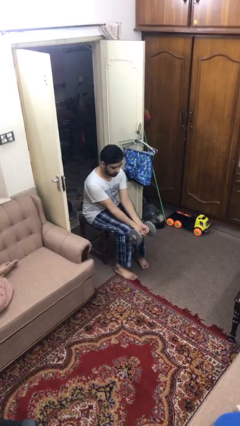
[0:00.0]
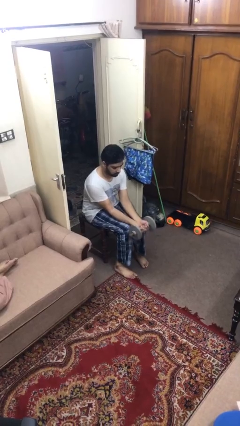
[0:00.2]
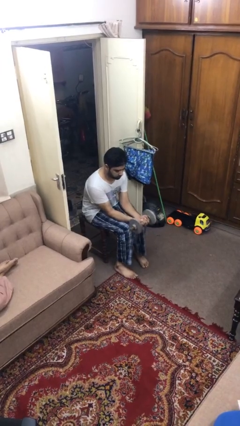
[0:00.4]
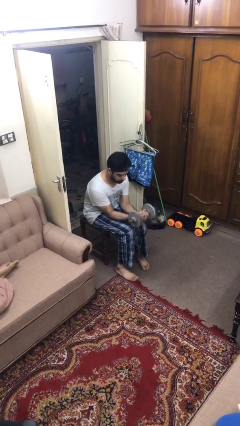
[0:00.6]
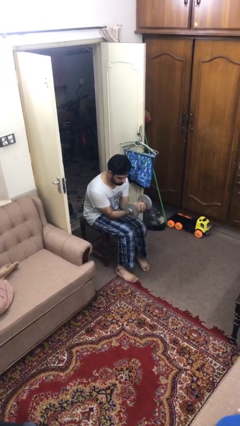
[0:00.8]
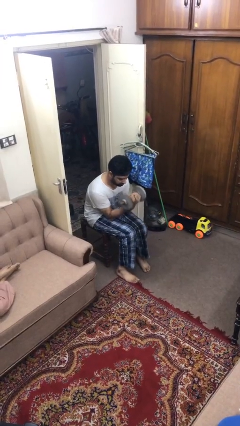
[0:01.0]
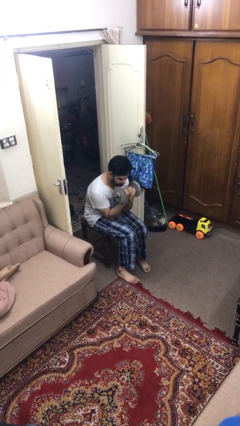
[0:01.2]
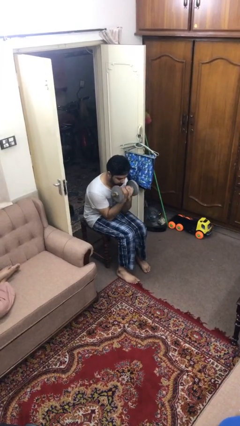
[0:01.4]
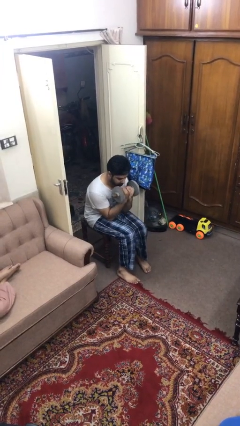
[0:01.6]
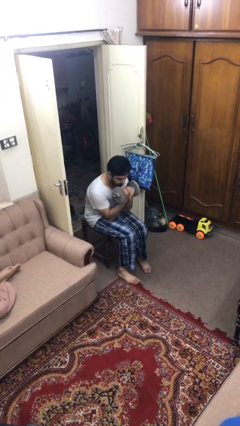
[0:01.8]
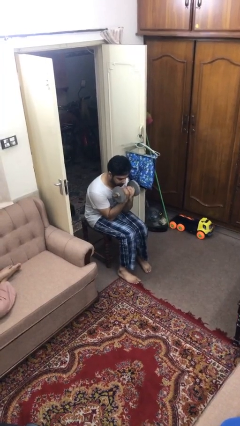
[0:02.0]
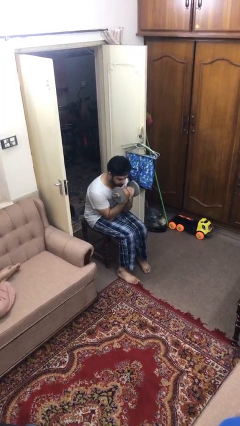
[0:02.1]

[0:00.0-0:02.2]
person lifts dumbbells

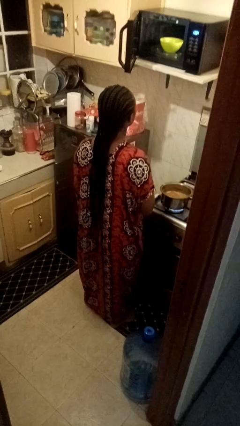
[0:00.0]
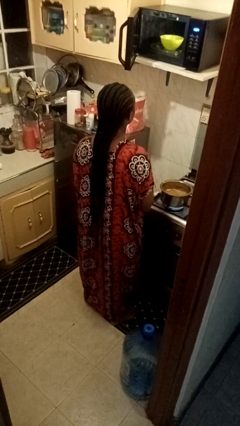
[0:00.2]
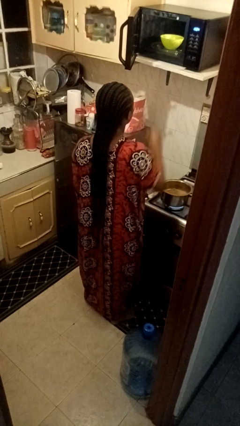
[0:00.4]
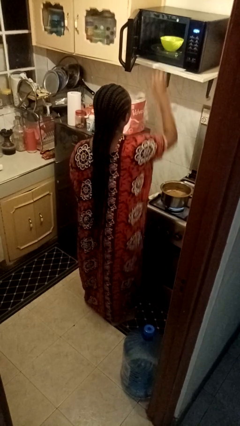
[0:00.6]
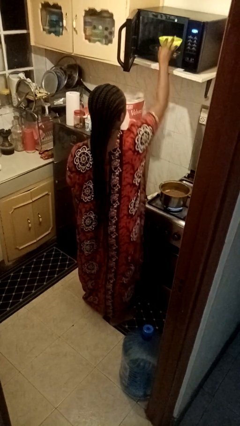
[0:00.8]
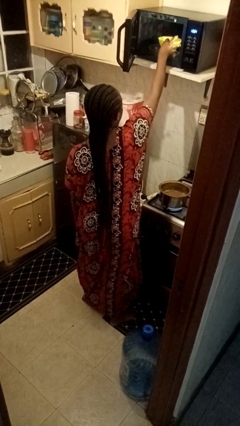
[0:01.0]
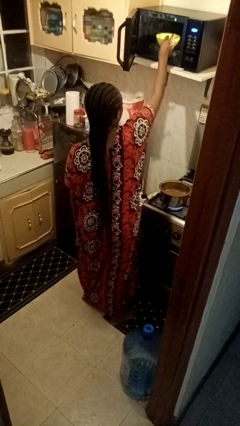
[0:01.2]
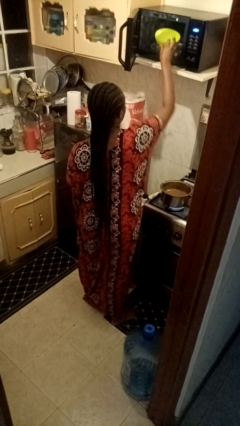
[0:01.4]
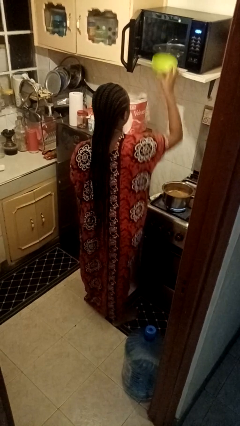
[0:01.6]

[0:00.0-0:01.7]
person takes object from microwave

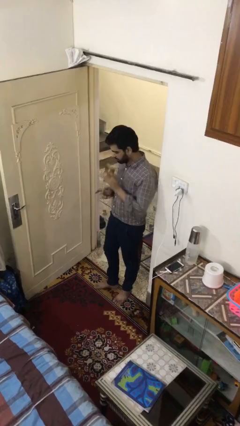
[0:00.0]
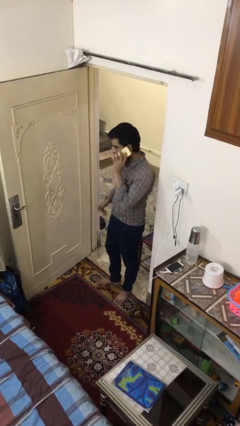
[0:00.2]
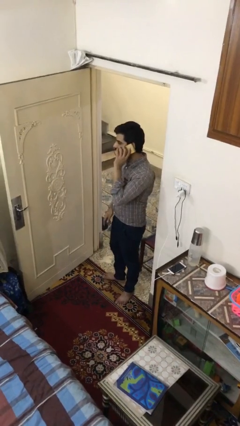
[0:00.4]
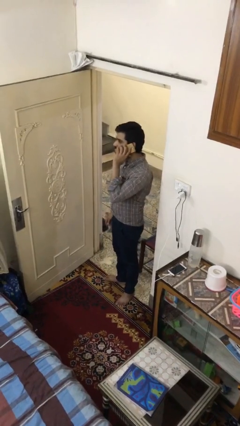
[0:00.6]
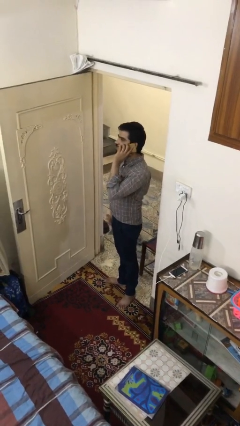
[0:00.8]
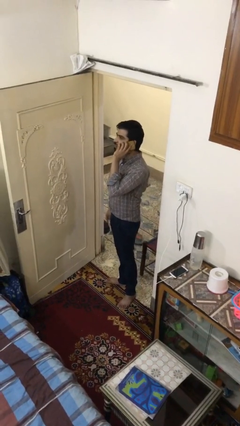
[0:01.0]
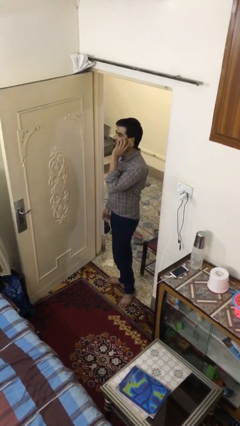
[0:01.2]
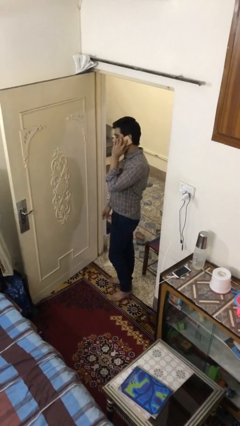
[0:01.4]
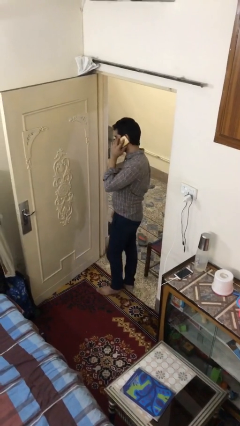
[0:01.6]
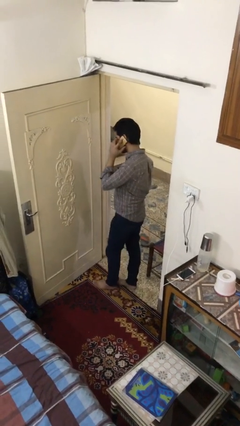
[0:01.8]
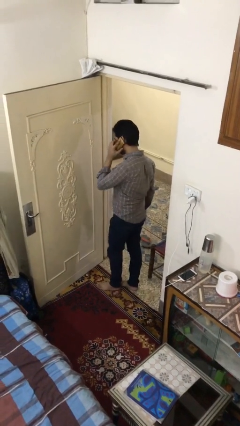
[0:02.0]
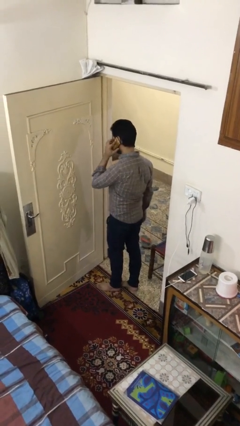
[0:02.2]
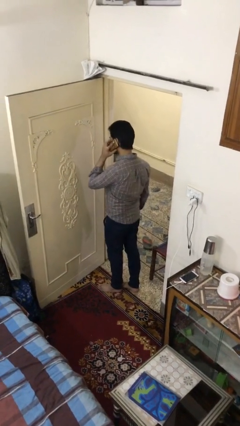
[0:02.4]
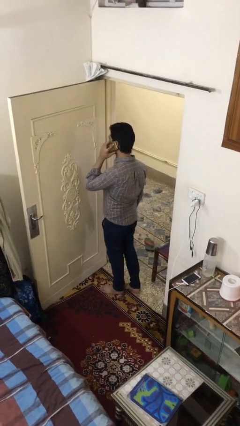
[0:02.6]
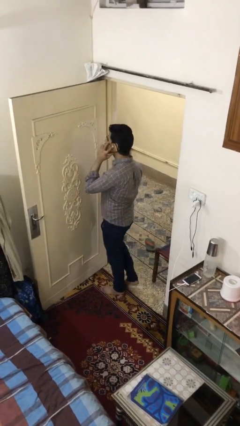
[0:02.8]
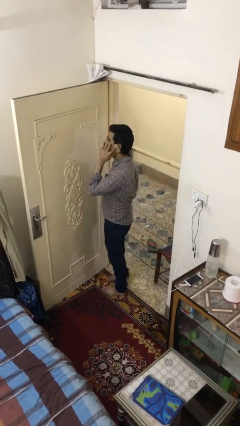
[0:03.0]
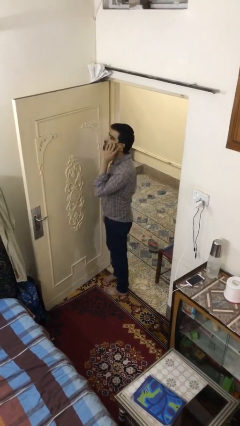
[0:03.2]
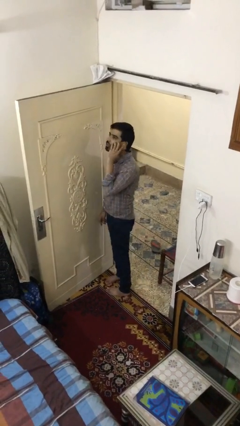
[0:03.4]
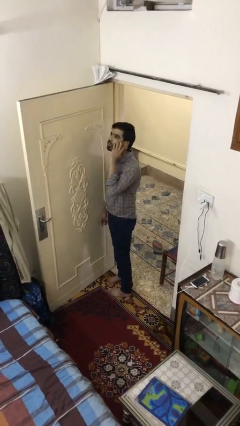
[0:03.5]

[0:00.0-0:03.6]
person talks on phone

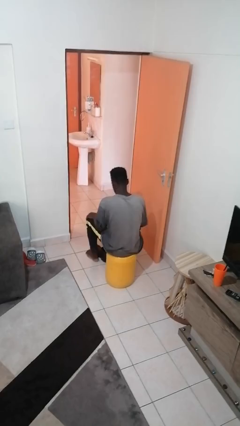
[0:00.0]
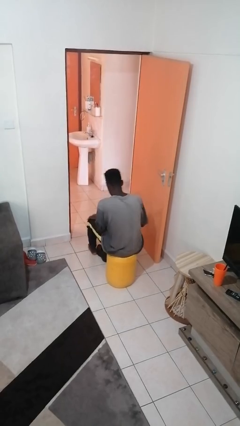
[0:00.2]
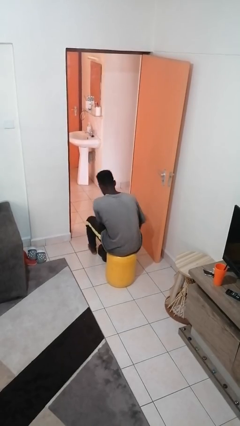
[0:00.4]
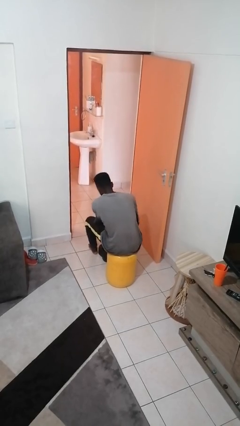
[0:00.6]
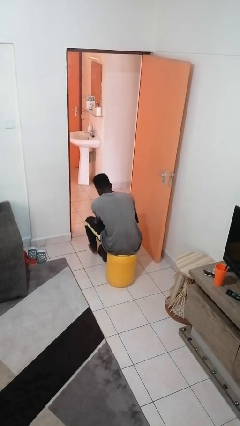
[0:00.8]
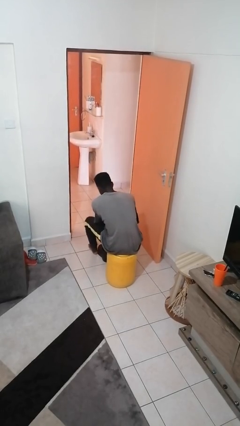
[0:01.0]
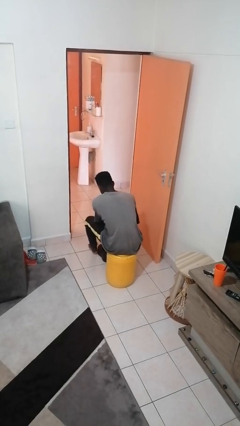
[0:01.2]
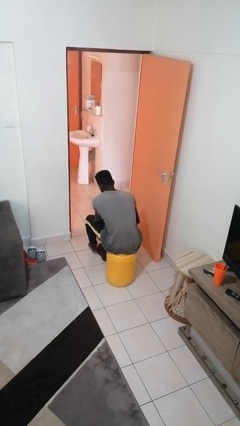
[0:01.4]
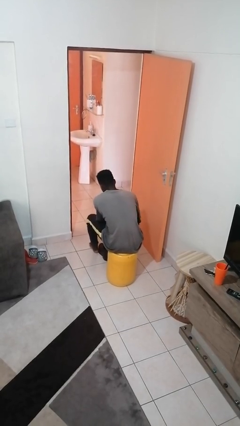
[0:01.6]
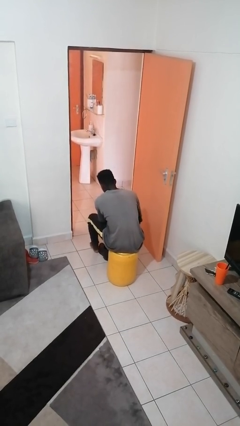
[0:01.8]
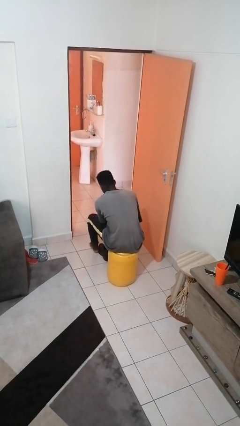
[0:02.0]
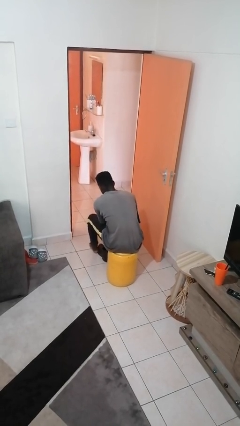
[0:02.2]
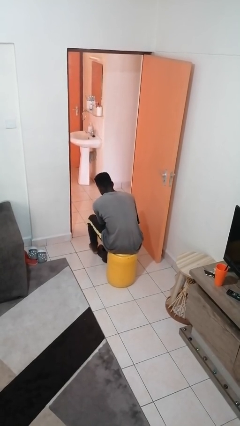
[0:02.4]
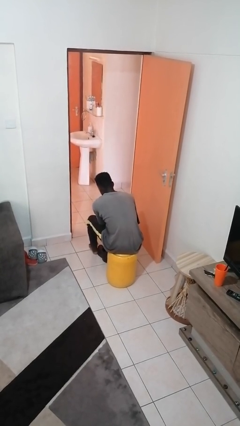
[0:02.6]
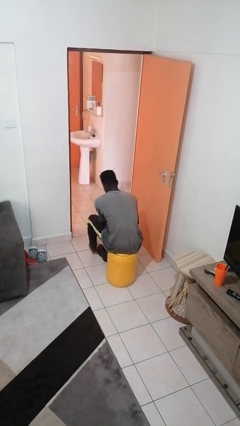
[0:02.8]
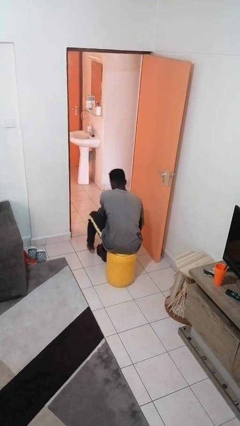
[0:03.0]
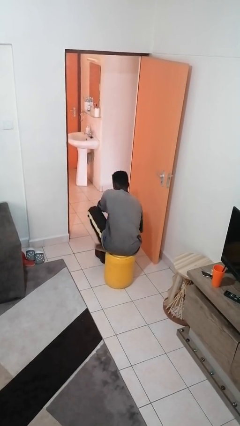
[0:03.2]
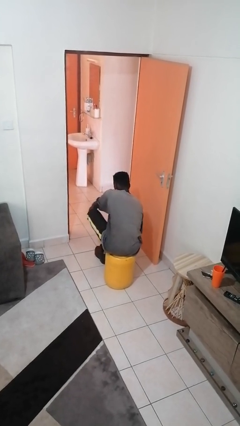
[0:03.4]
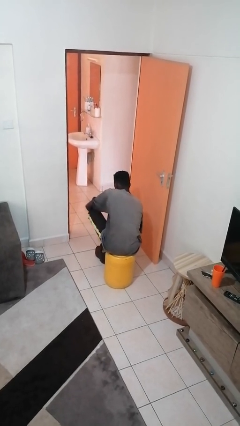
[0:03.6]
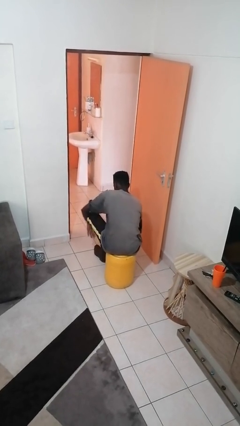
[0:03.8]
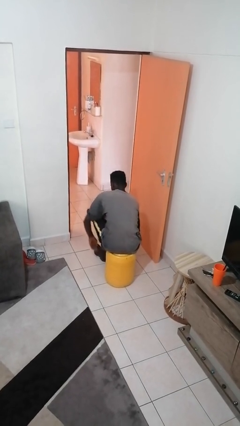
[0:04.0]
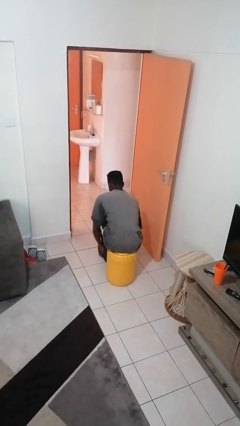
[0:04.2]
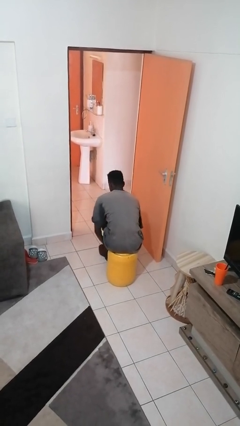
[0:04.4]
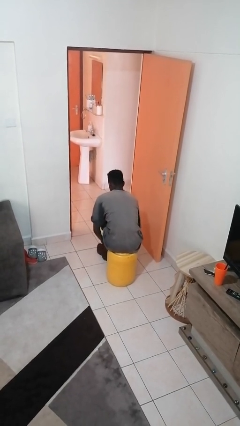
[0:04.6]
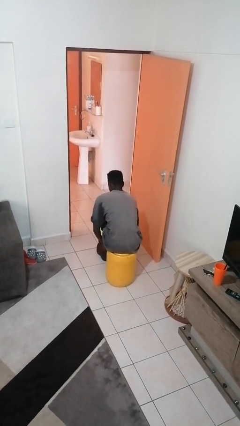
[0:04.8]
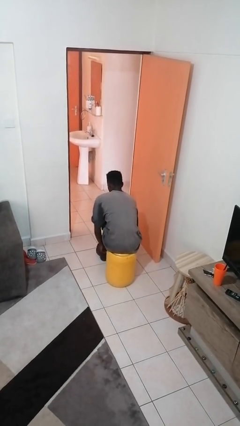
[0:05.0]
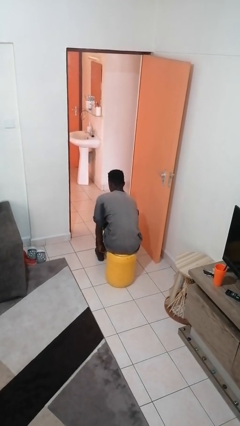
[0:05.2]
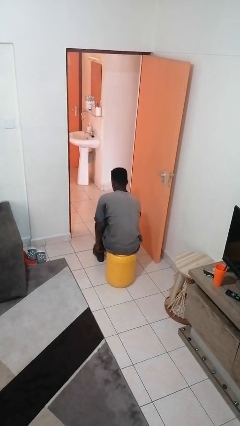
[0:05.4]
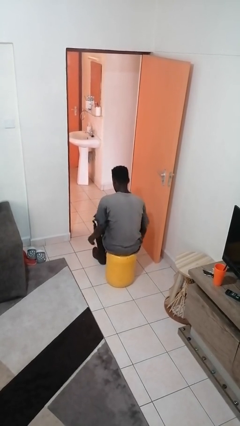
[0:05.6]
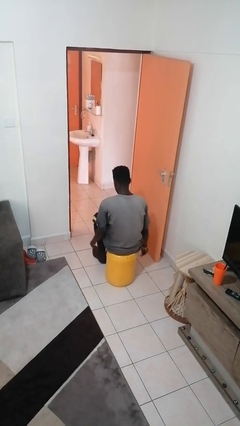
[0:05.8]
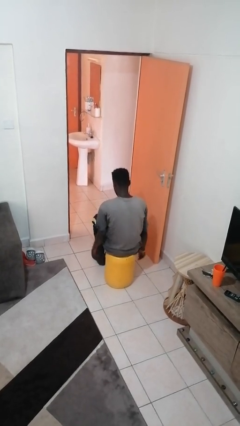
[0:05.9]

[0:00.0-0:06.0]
person puts on shoes

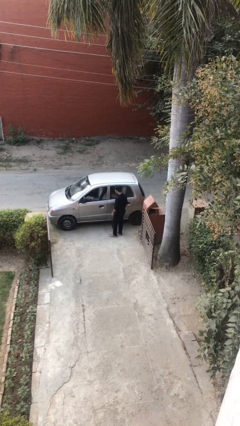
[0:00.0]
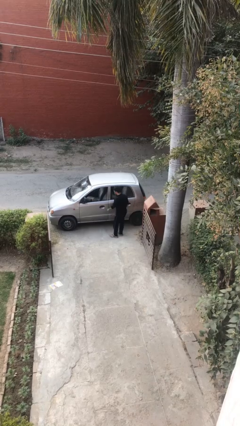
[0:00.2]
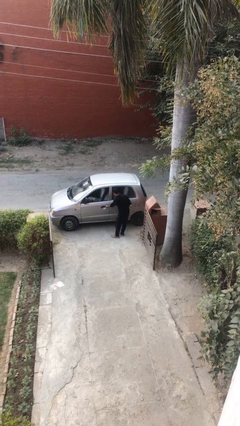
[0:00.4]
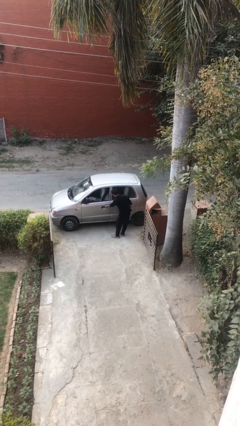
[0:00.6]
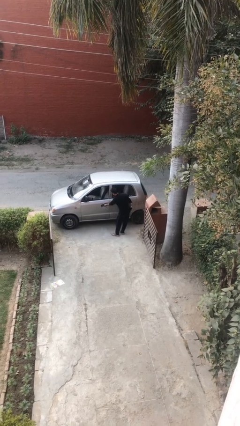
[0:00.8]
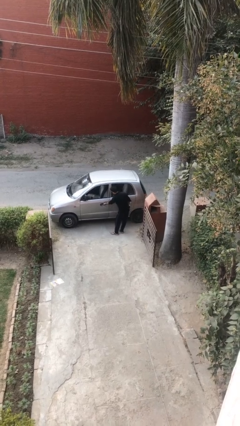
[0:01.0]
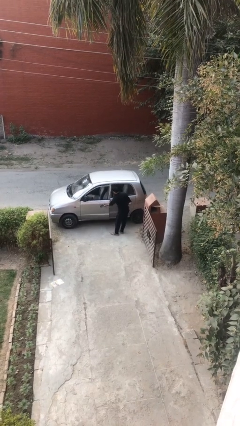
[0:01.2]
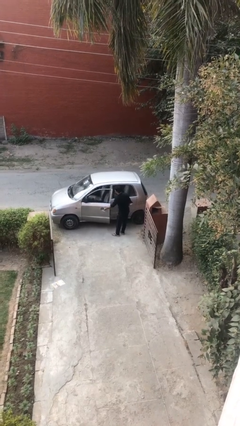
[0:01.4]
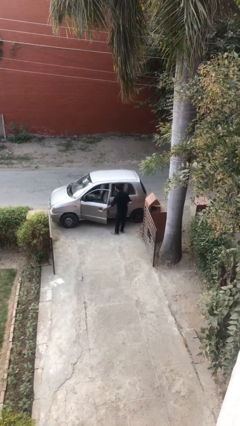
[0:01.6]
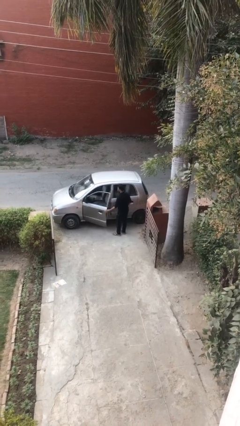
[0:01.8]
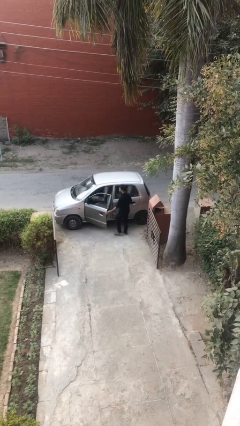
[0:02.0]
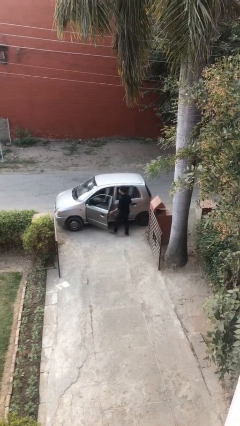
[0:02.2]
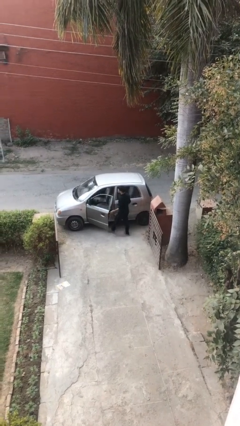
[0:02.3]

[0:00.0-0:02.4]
person opens car door

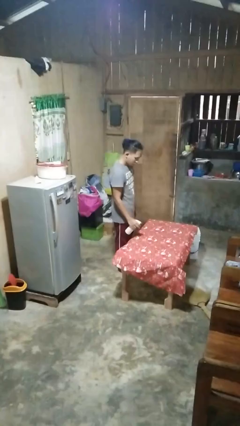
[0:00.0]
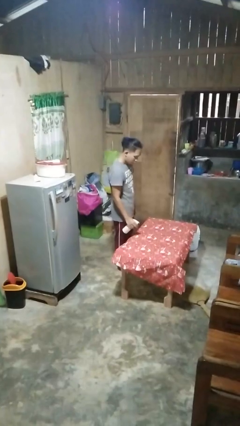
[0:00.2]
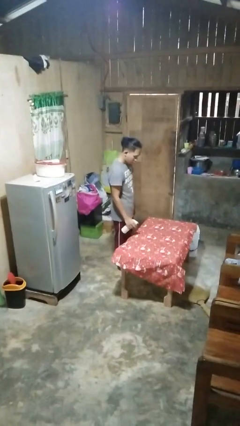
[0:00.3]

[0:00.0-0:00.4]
person sprays from bottle

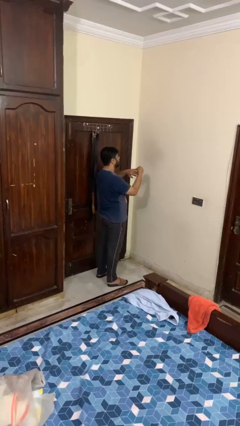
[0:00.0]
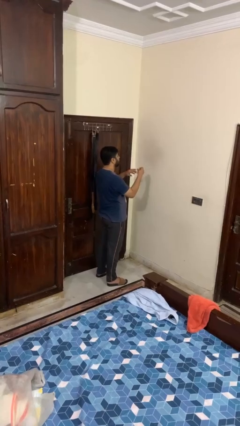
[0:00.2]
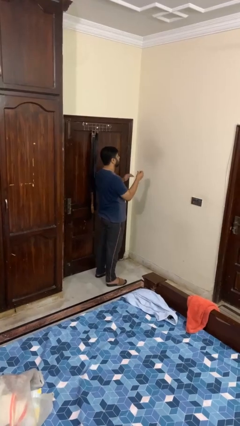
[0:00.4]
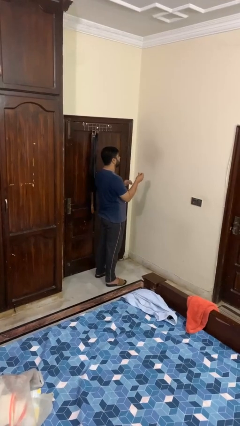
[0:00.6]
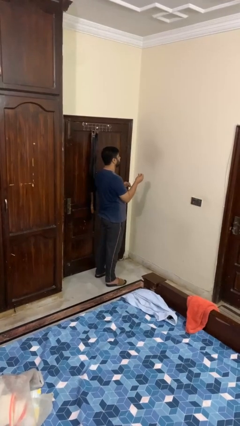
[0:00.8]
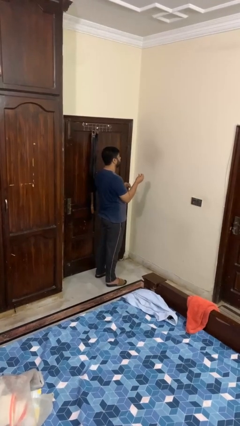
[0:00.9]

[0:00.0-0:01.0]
person takes off ring

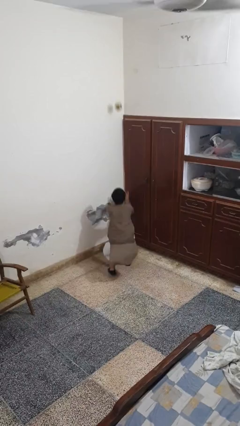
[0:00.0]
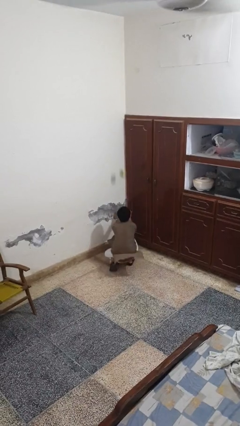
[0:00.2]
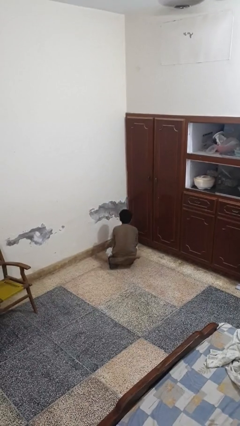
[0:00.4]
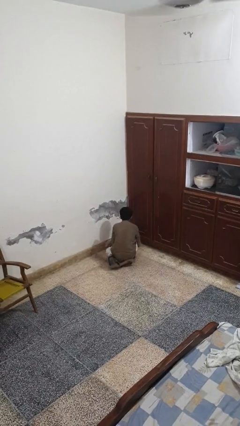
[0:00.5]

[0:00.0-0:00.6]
person catches dropped object
